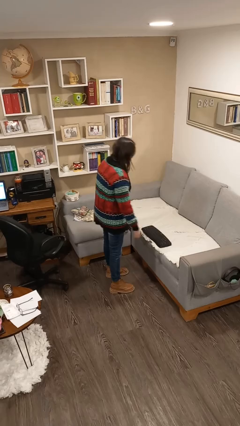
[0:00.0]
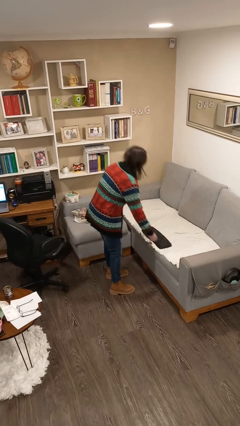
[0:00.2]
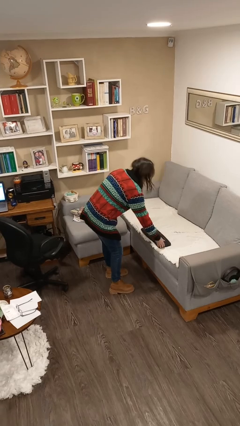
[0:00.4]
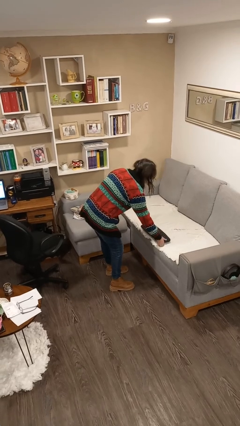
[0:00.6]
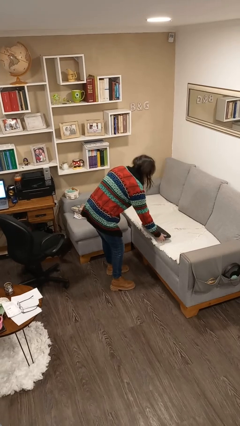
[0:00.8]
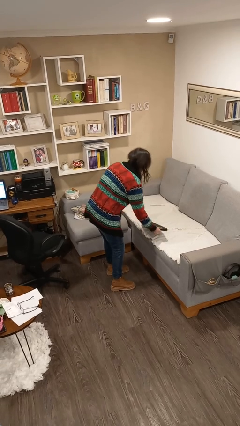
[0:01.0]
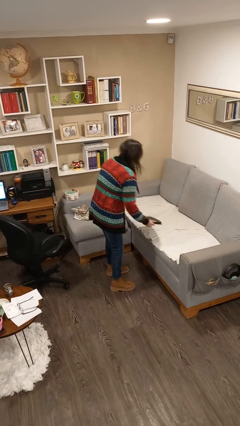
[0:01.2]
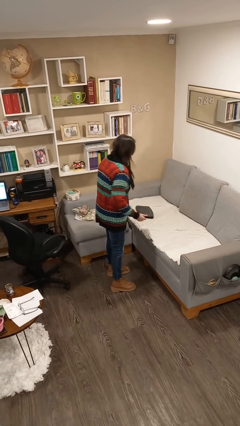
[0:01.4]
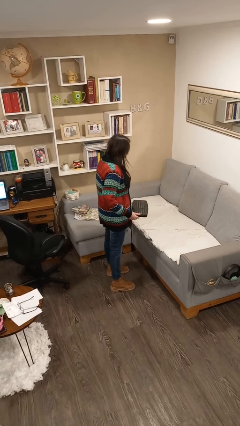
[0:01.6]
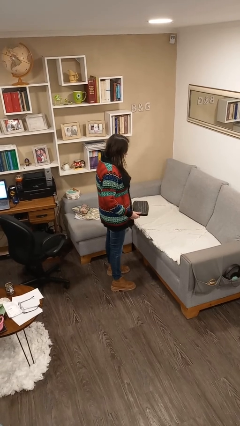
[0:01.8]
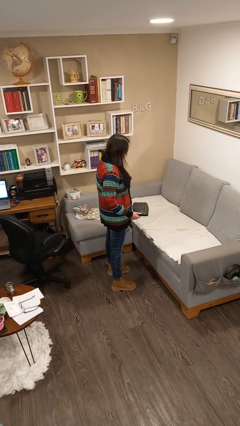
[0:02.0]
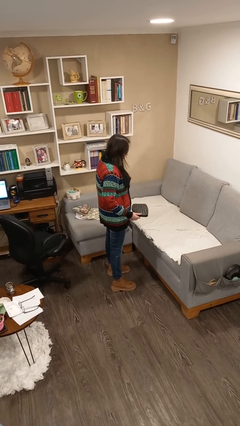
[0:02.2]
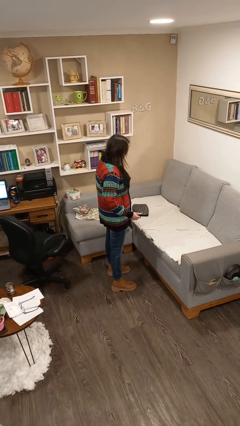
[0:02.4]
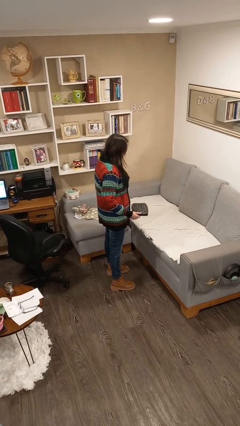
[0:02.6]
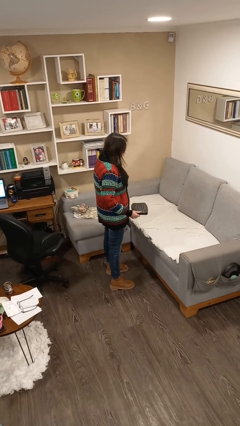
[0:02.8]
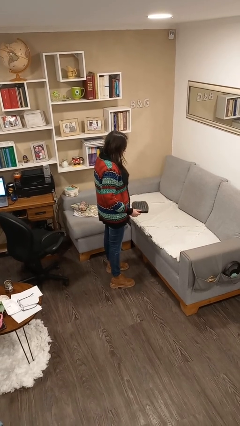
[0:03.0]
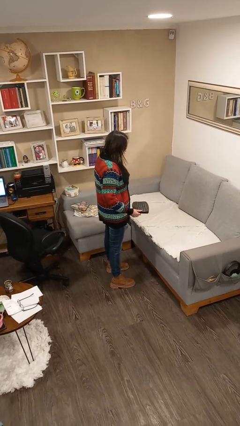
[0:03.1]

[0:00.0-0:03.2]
person picks up object from couch

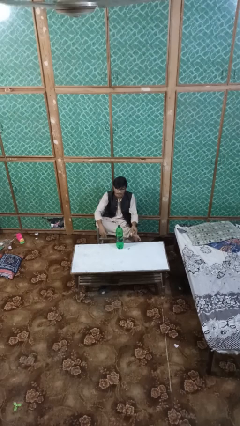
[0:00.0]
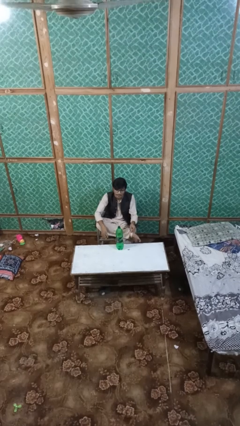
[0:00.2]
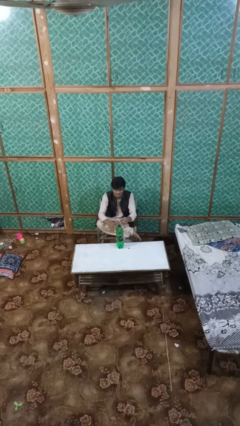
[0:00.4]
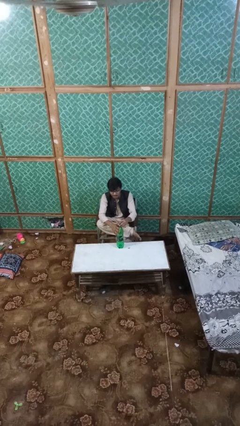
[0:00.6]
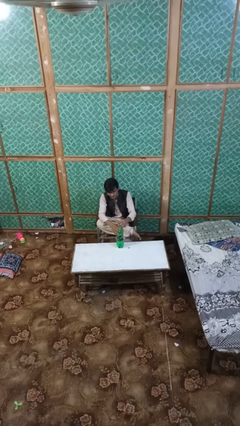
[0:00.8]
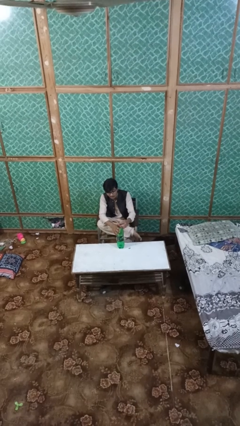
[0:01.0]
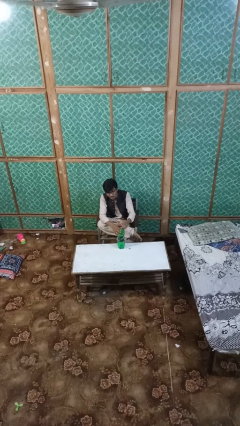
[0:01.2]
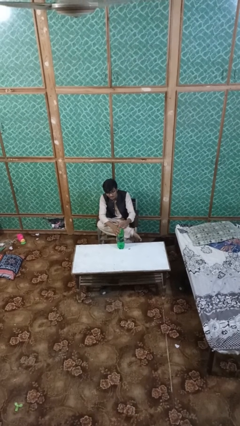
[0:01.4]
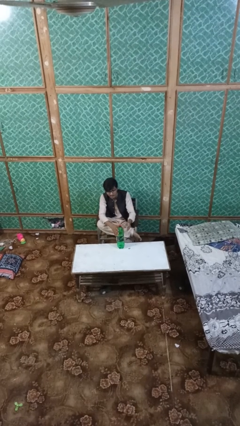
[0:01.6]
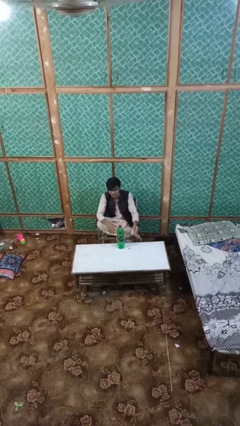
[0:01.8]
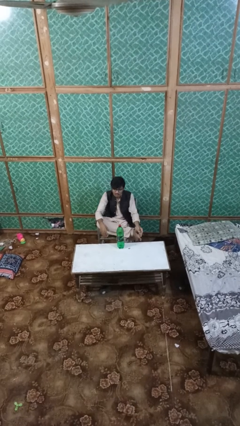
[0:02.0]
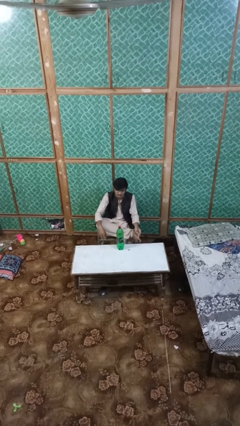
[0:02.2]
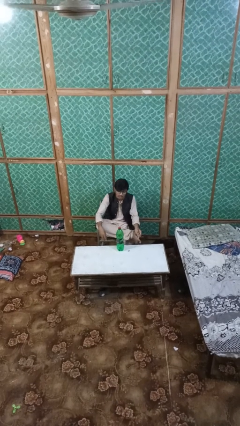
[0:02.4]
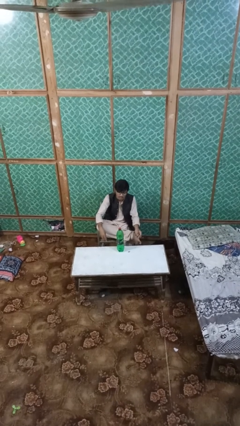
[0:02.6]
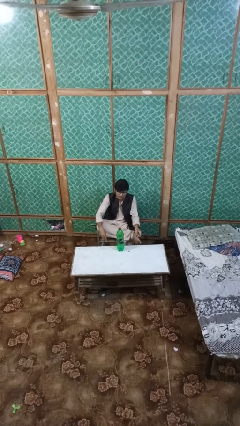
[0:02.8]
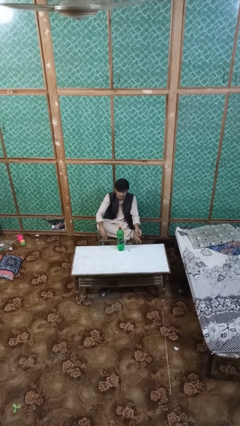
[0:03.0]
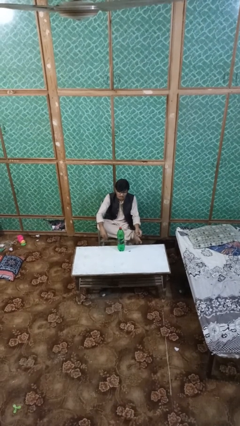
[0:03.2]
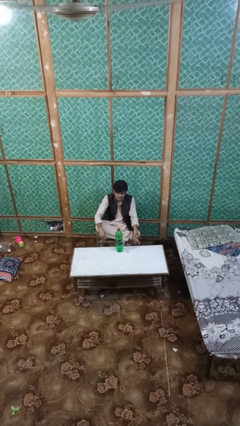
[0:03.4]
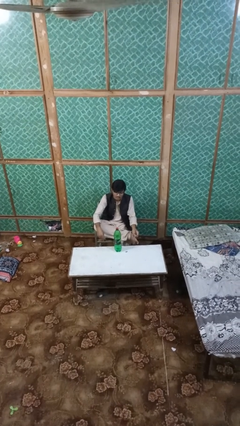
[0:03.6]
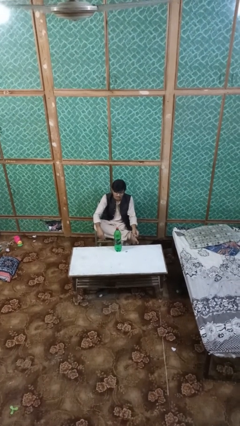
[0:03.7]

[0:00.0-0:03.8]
person screws lid to bottle

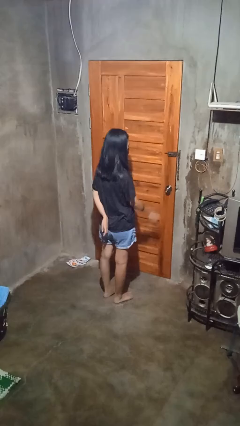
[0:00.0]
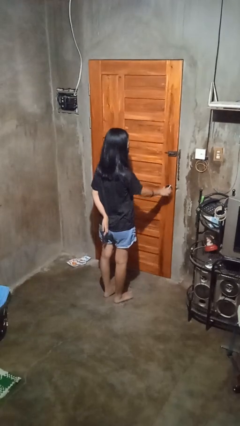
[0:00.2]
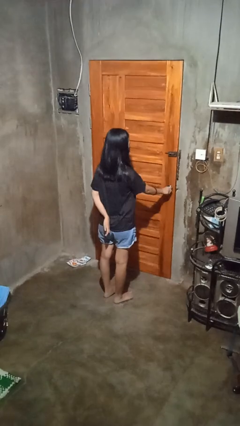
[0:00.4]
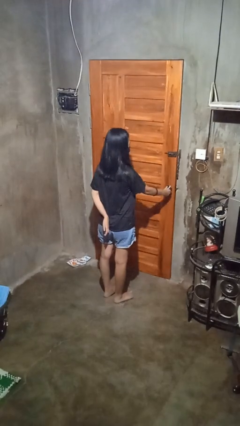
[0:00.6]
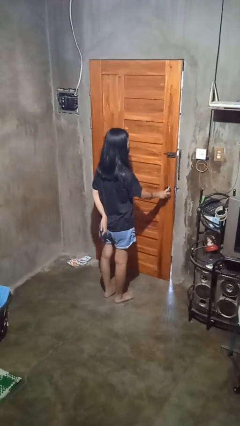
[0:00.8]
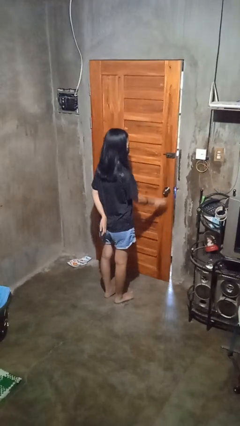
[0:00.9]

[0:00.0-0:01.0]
person opens facility door

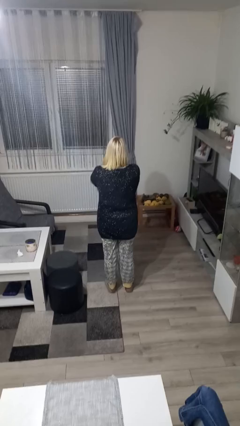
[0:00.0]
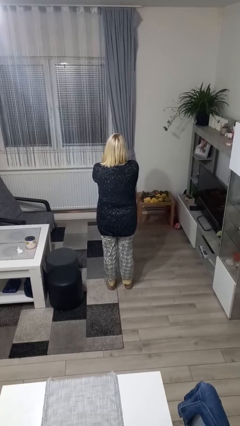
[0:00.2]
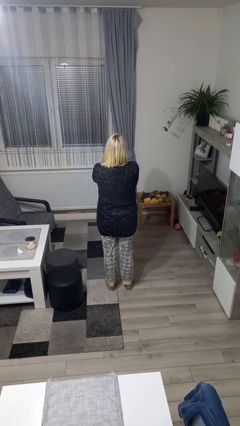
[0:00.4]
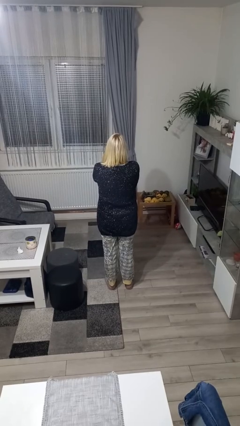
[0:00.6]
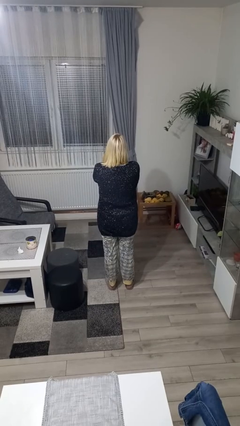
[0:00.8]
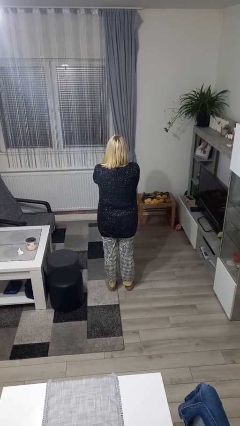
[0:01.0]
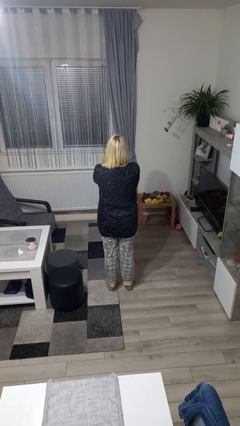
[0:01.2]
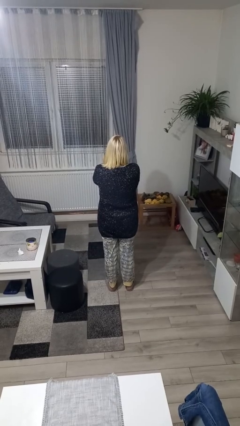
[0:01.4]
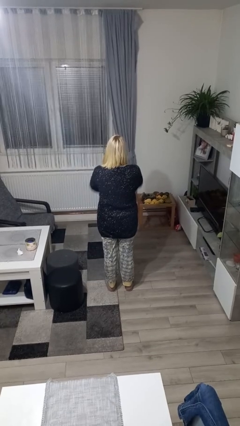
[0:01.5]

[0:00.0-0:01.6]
person gestures arms x

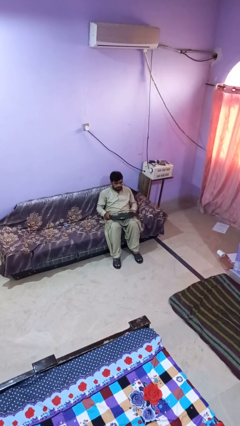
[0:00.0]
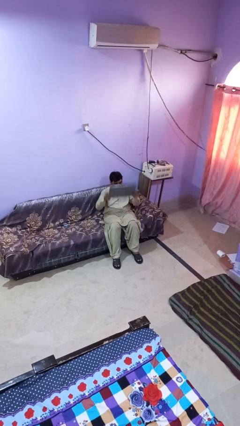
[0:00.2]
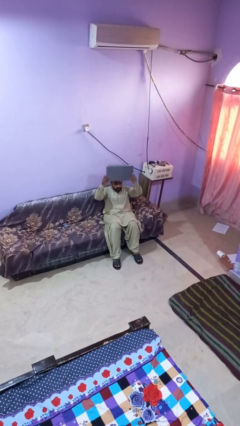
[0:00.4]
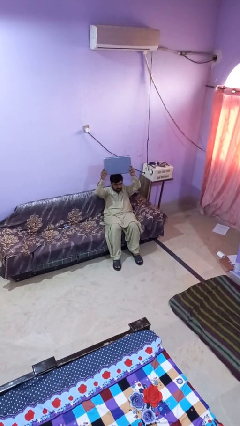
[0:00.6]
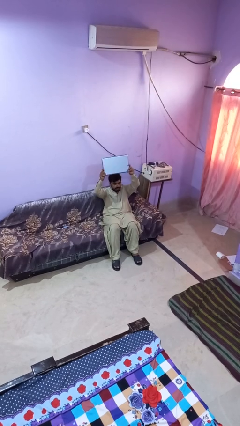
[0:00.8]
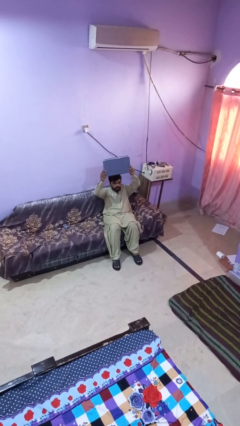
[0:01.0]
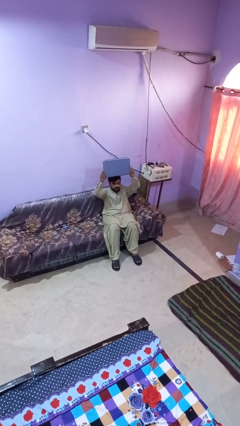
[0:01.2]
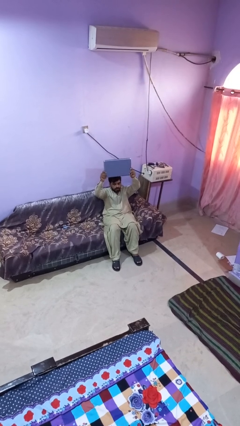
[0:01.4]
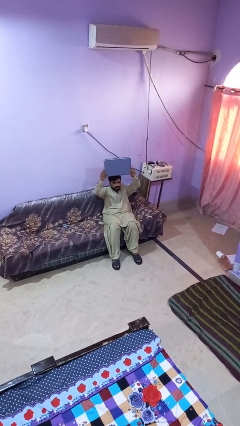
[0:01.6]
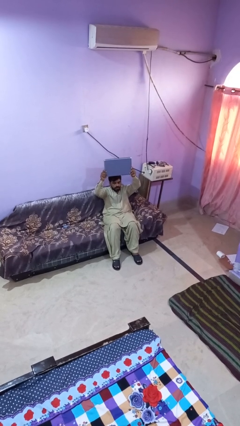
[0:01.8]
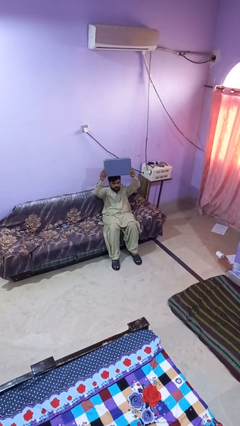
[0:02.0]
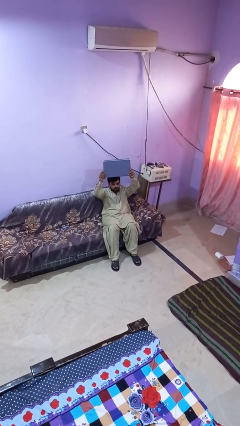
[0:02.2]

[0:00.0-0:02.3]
person holds object above head

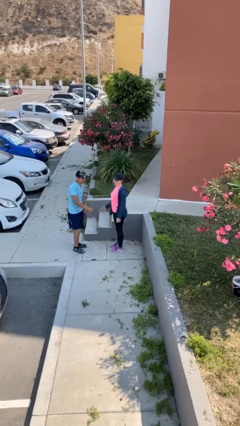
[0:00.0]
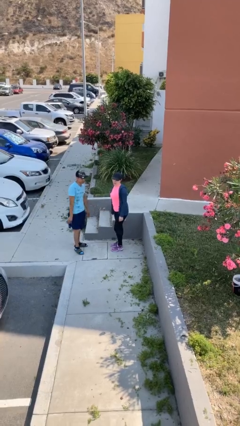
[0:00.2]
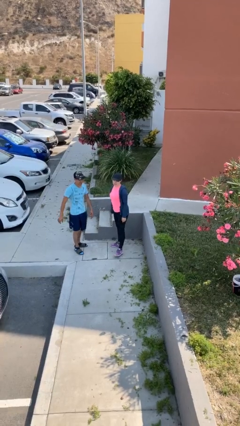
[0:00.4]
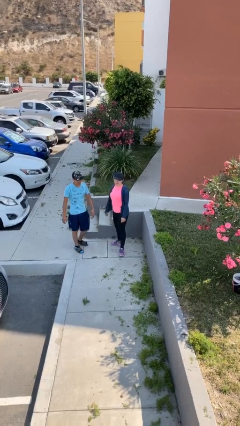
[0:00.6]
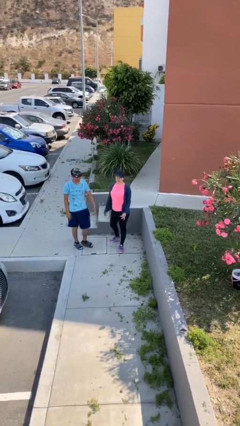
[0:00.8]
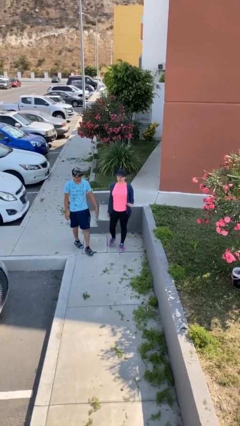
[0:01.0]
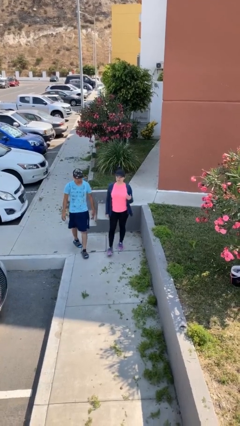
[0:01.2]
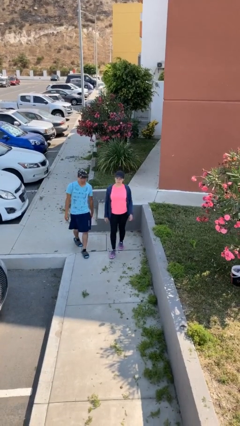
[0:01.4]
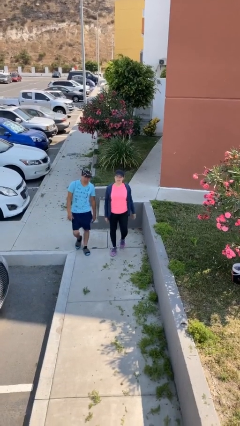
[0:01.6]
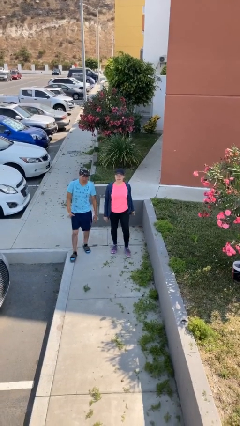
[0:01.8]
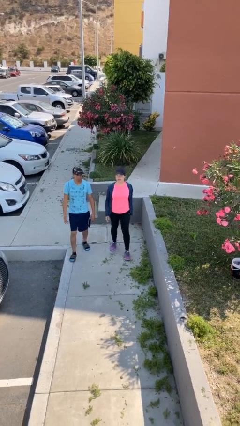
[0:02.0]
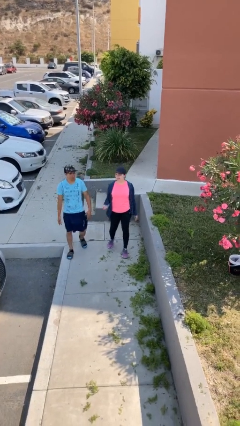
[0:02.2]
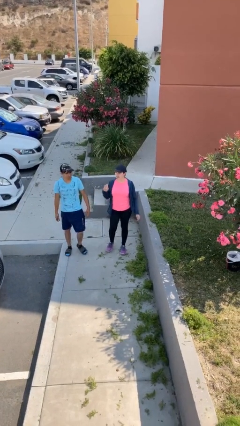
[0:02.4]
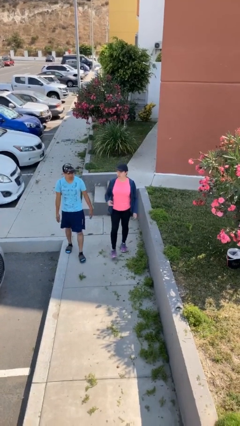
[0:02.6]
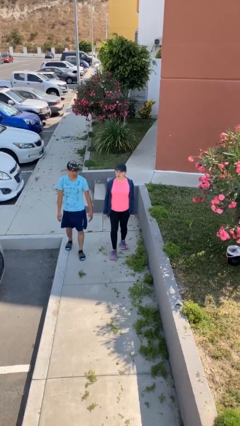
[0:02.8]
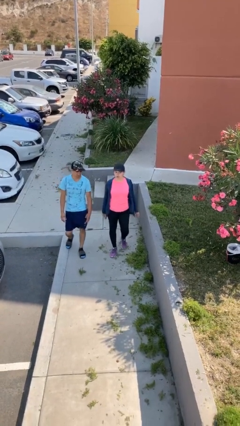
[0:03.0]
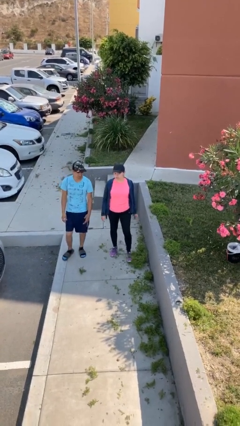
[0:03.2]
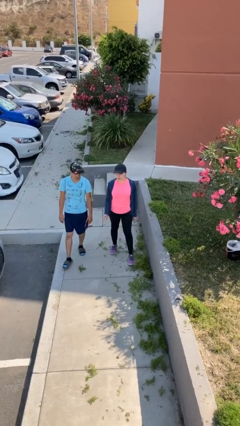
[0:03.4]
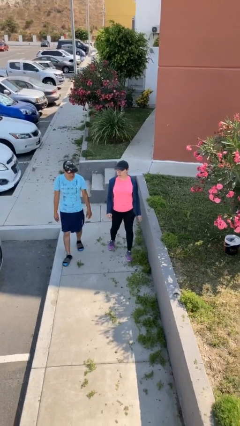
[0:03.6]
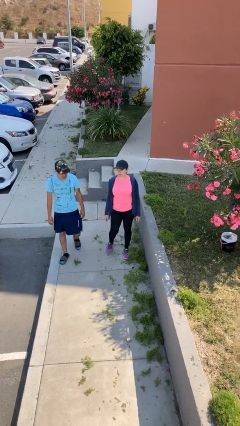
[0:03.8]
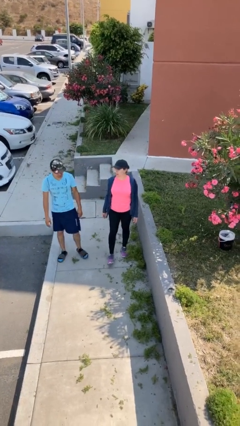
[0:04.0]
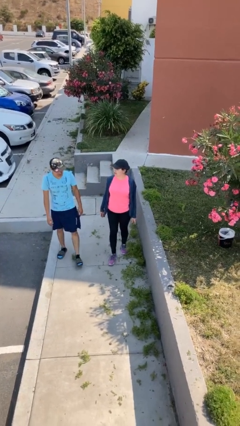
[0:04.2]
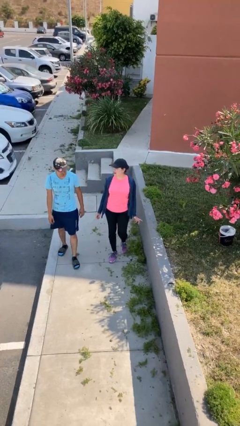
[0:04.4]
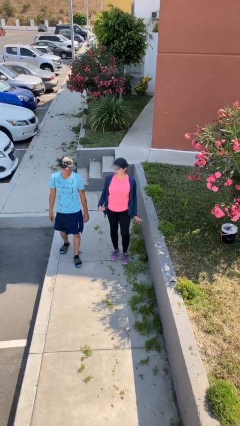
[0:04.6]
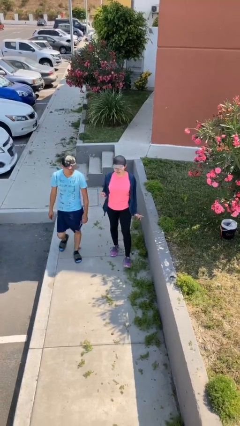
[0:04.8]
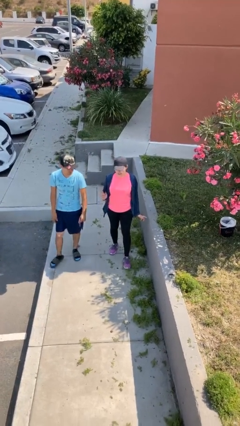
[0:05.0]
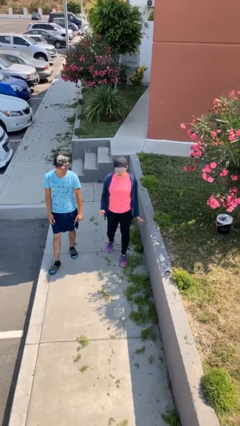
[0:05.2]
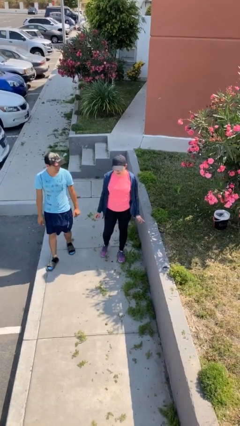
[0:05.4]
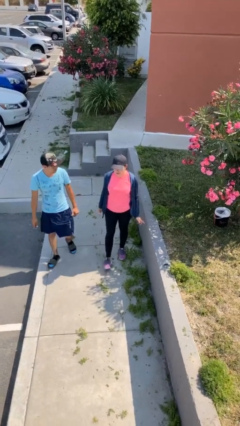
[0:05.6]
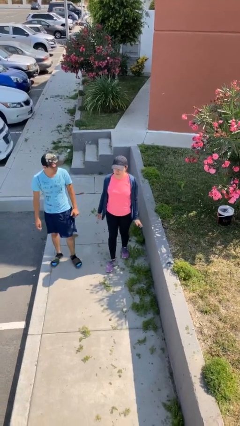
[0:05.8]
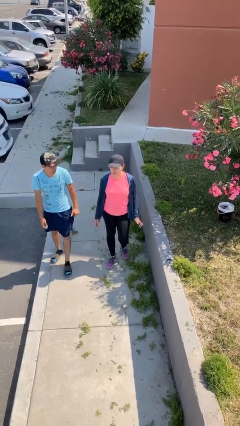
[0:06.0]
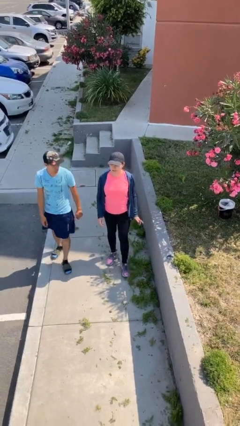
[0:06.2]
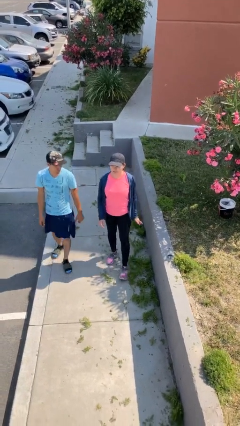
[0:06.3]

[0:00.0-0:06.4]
person talks to person
